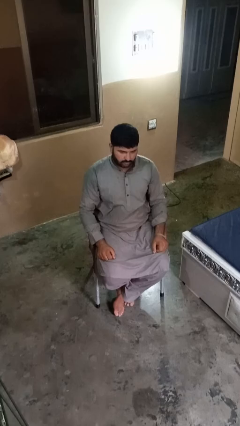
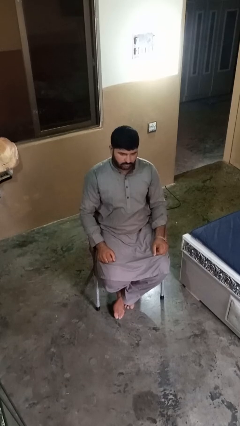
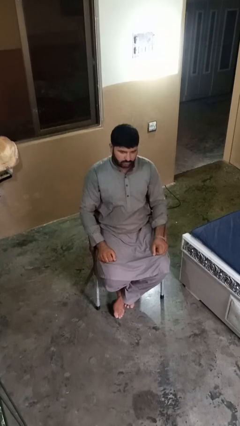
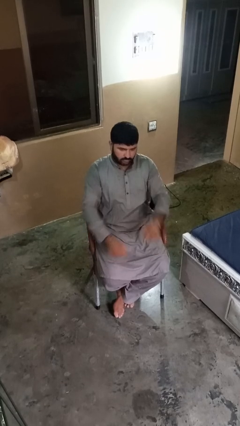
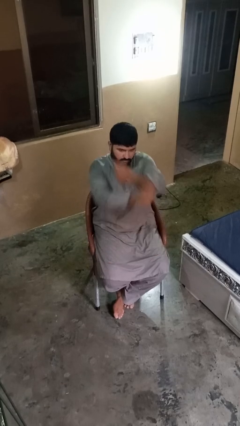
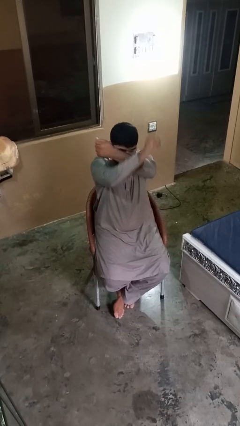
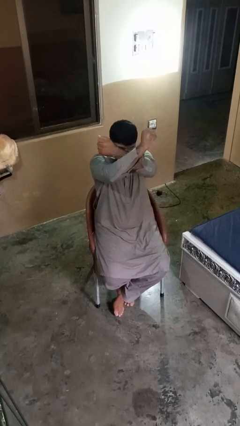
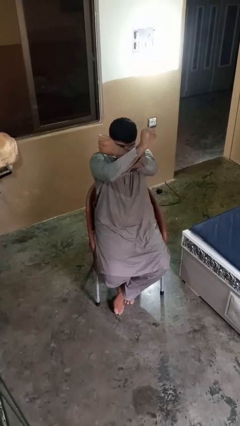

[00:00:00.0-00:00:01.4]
person gestures arms x

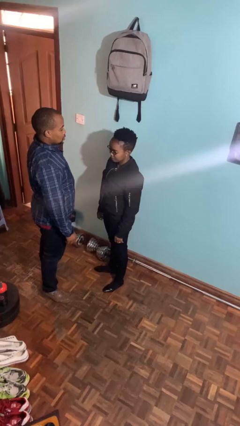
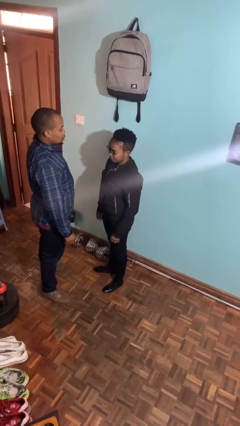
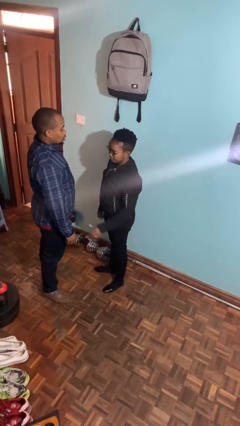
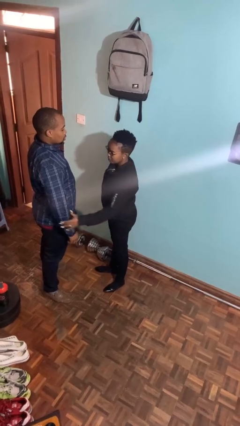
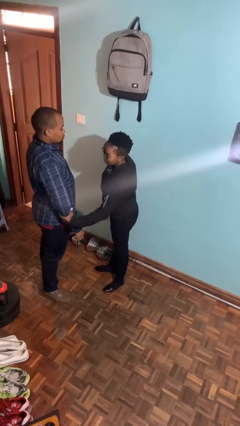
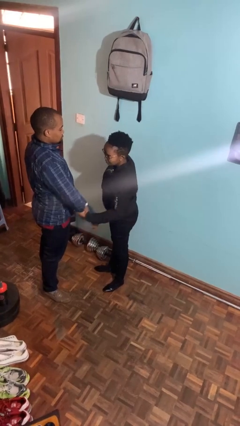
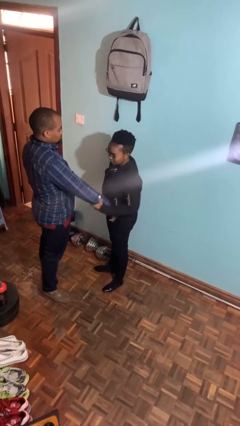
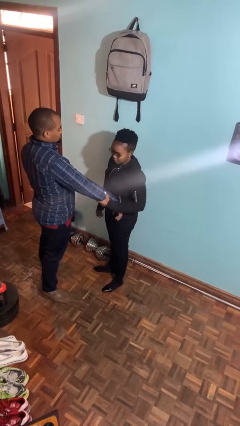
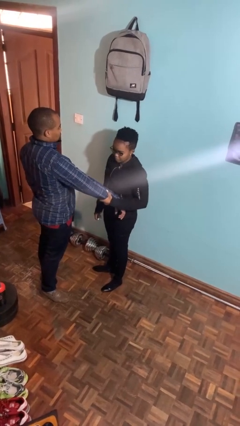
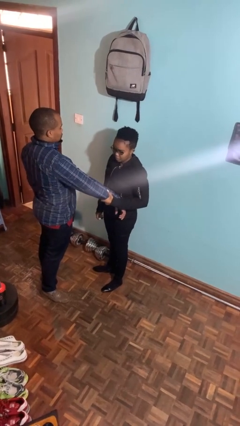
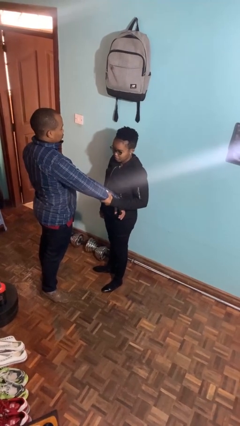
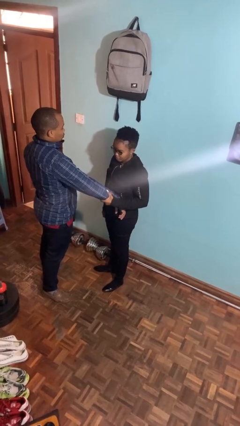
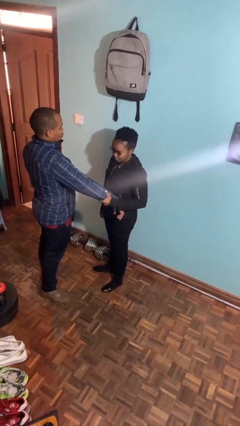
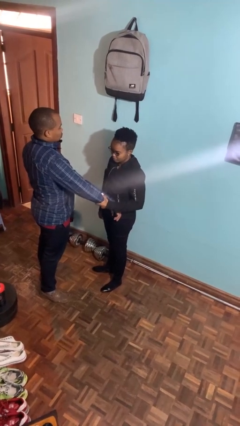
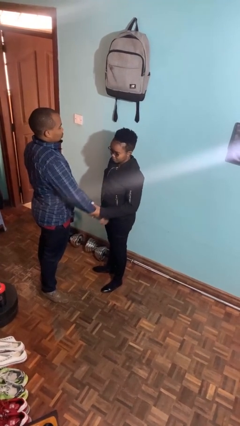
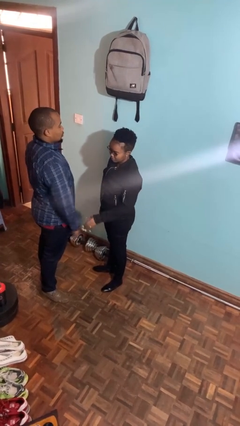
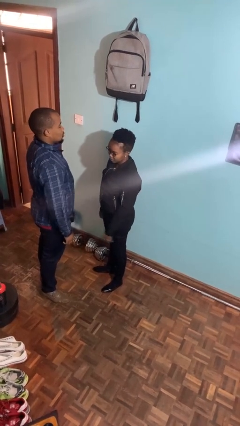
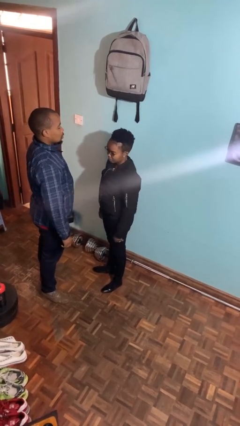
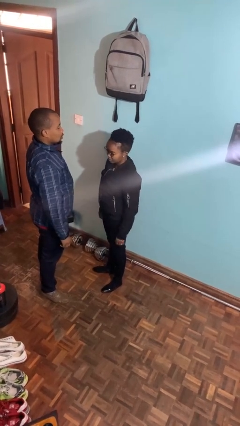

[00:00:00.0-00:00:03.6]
person grabs person by forearm

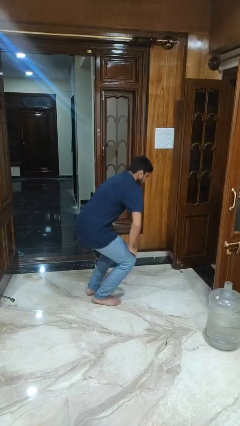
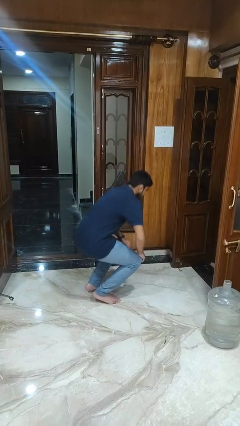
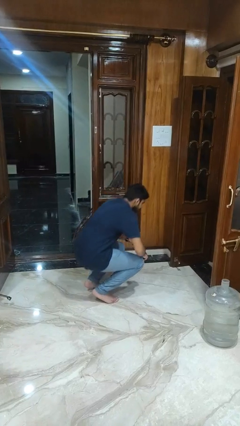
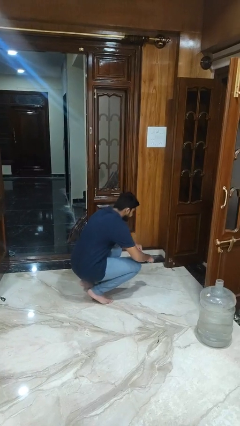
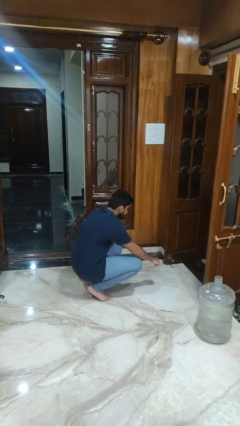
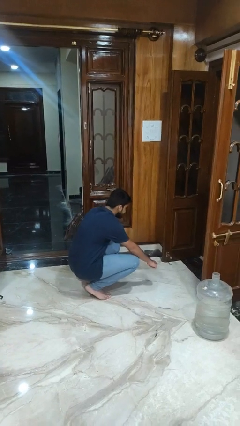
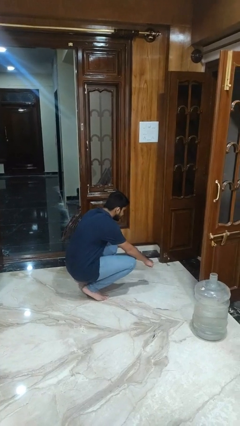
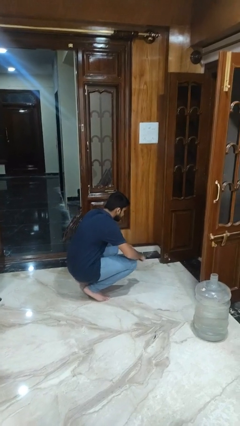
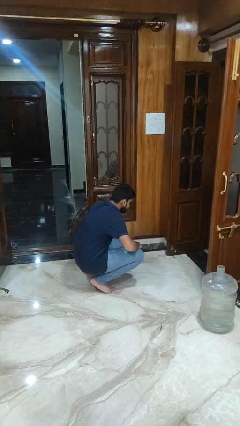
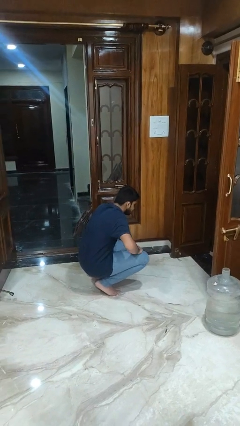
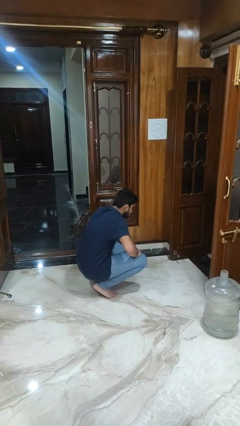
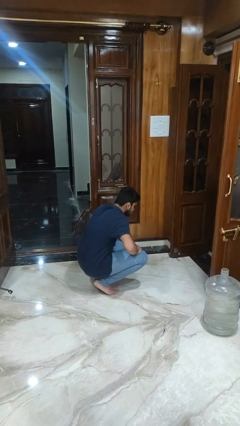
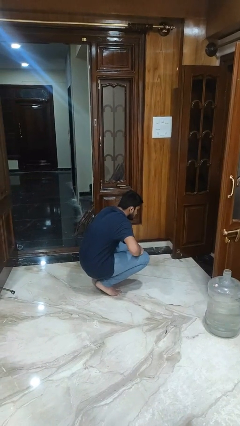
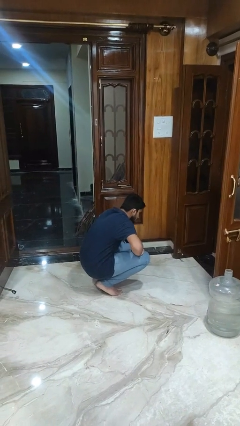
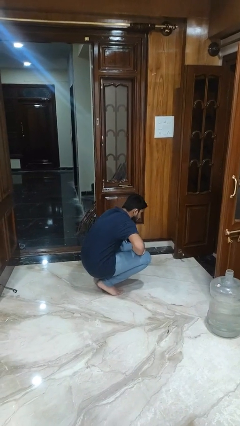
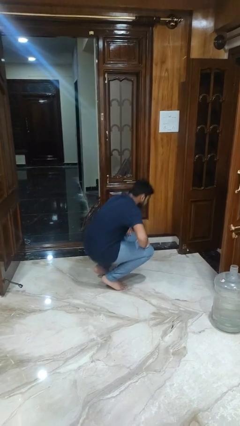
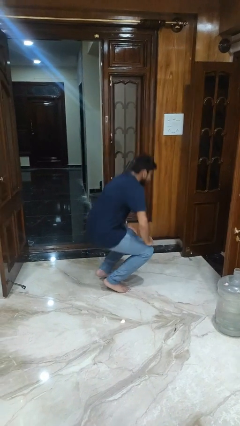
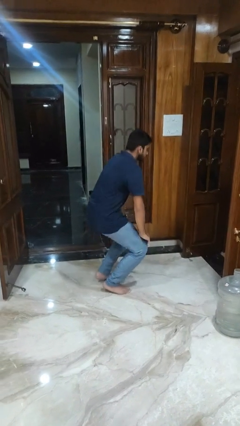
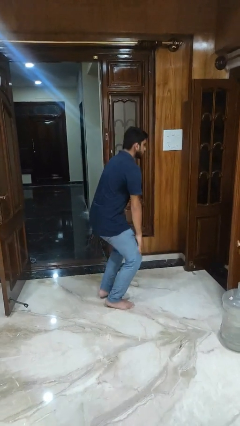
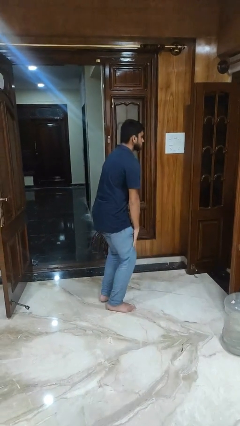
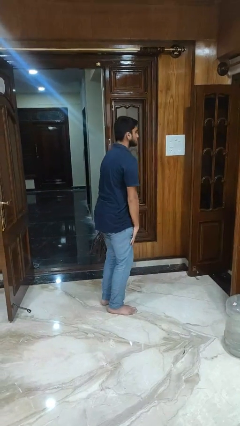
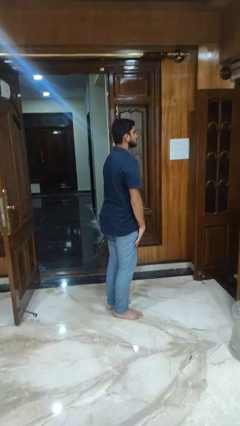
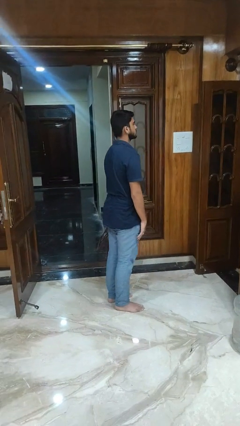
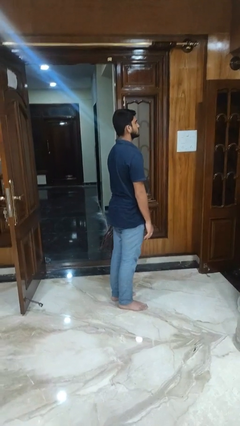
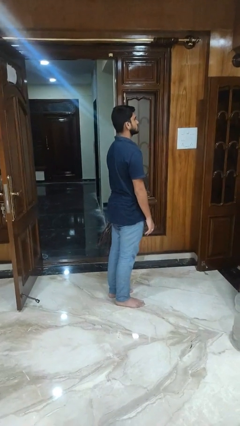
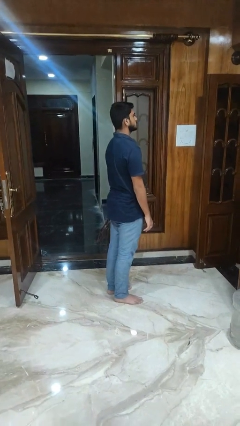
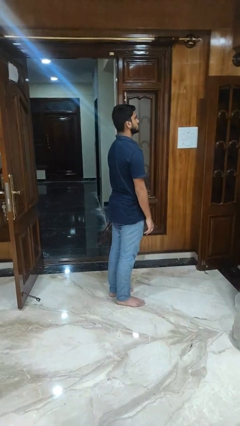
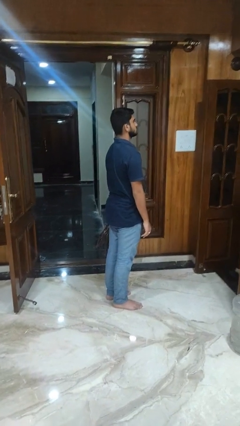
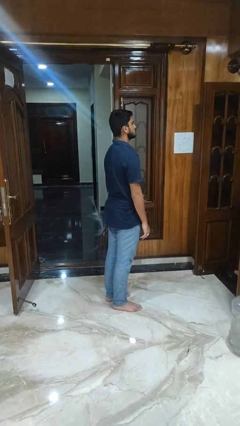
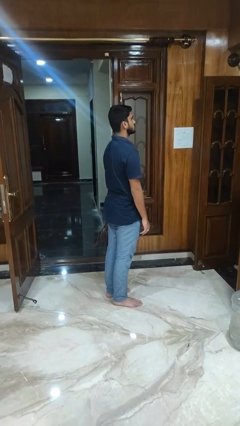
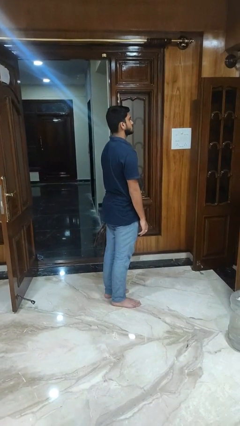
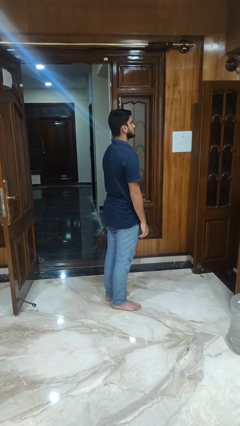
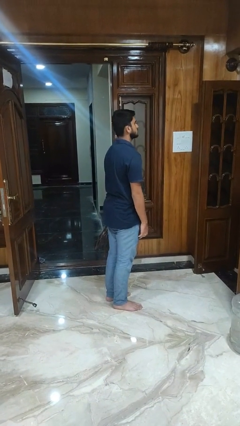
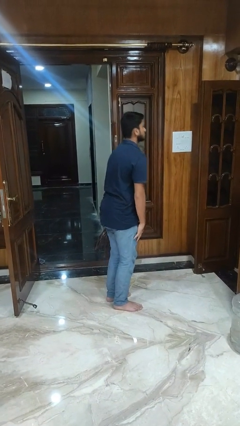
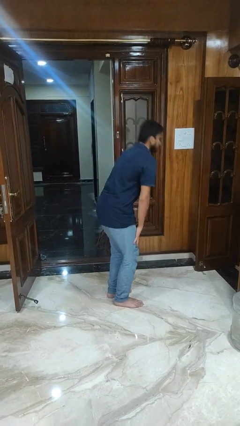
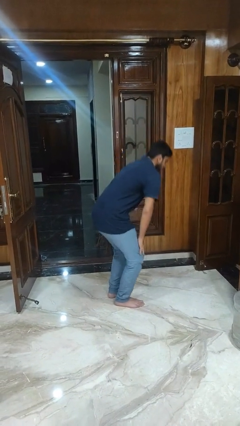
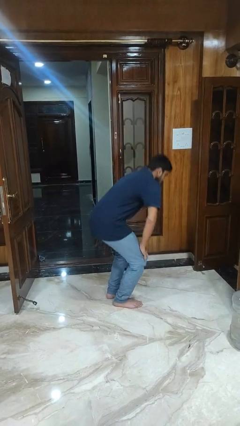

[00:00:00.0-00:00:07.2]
person squats

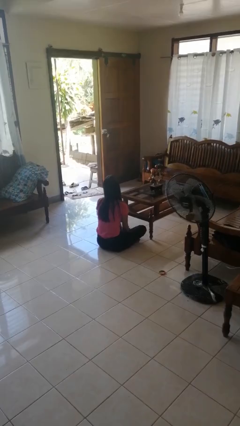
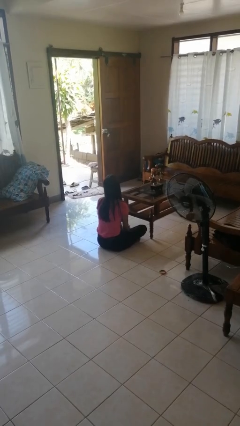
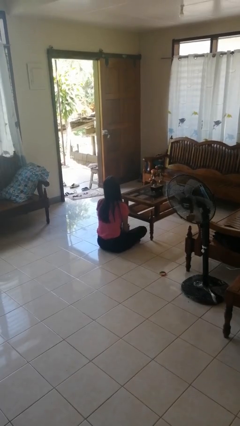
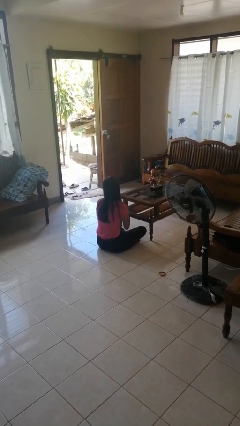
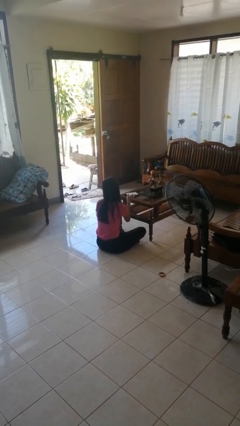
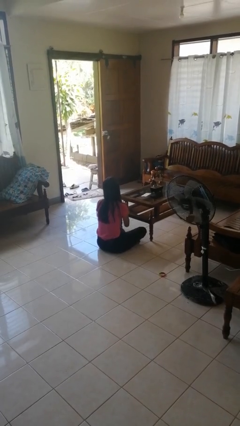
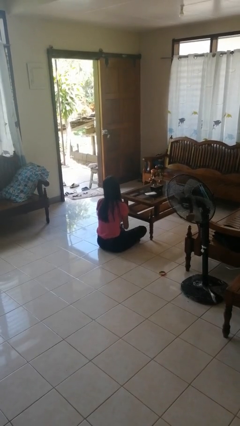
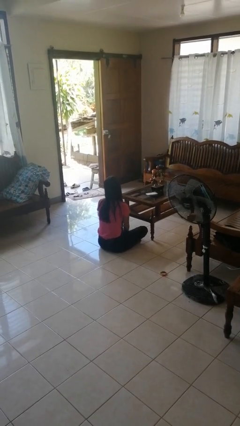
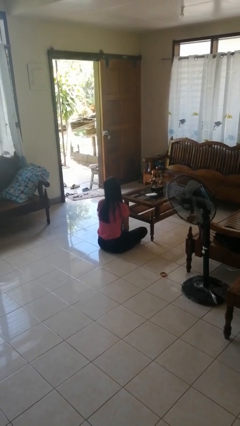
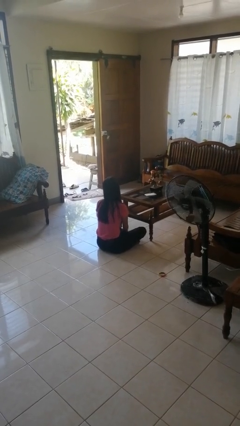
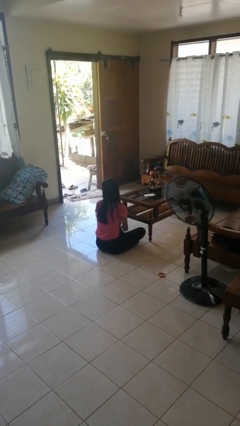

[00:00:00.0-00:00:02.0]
person throws object on table

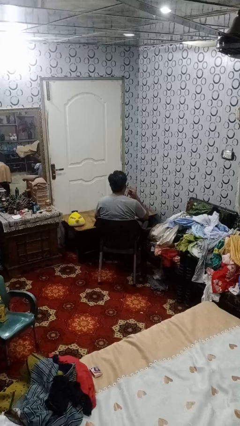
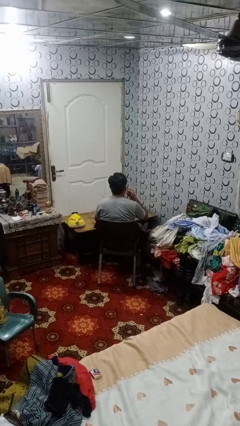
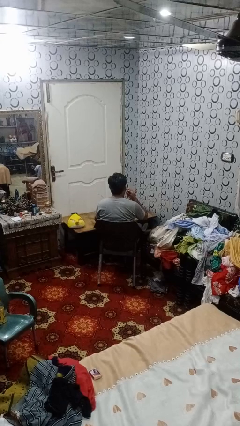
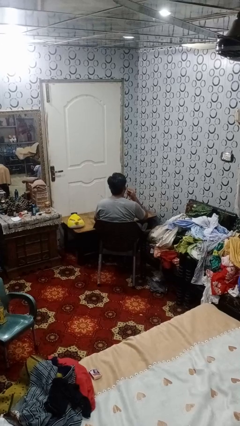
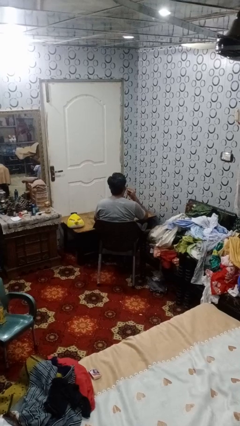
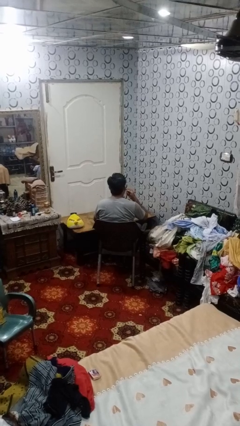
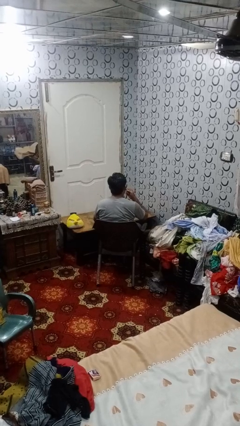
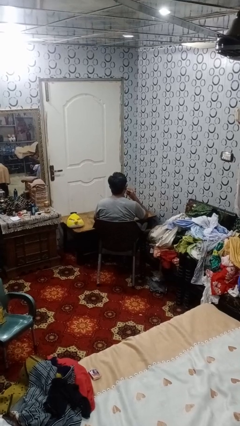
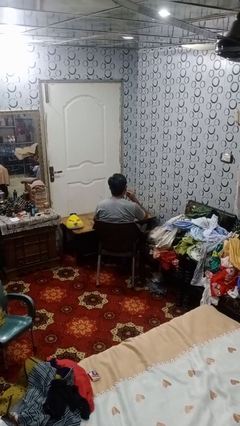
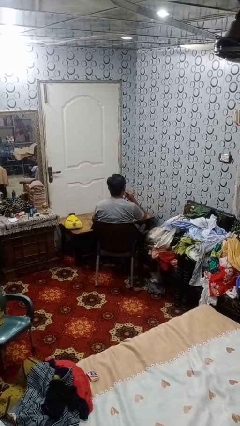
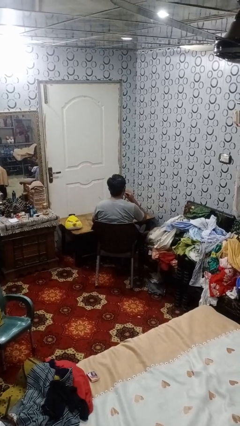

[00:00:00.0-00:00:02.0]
person licks fingers

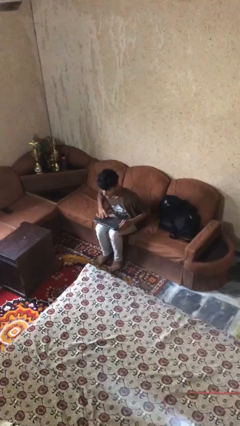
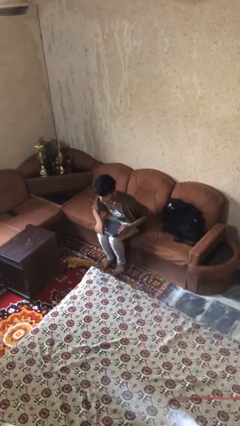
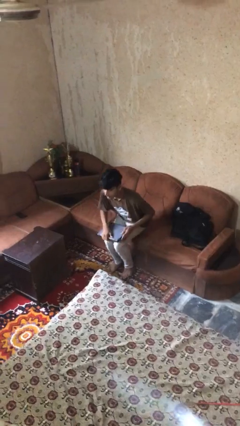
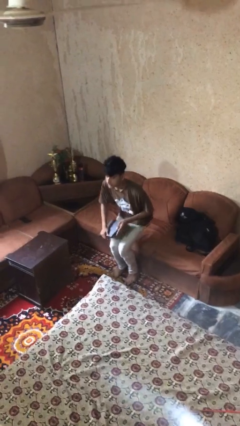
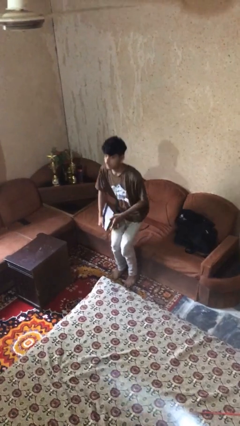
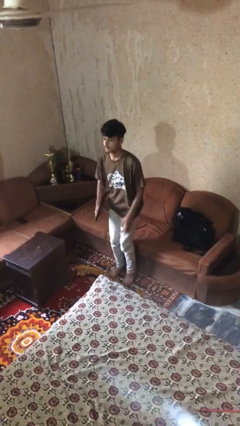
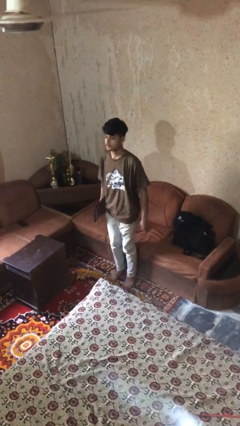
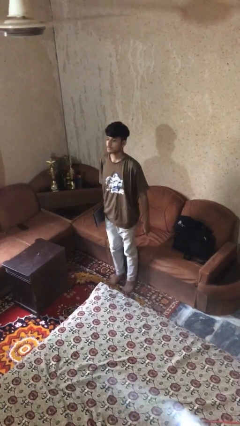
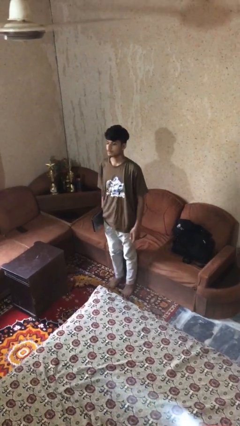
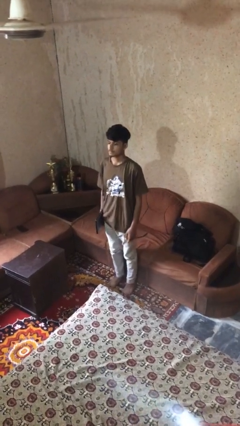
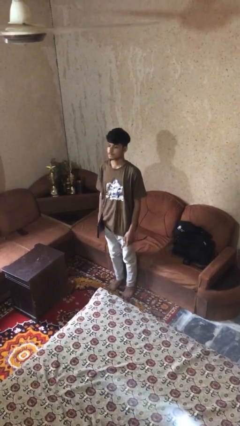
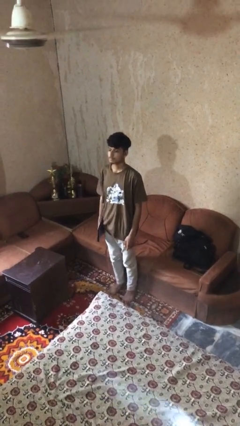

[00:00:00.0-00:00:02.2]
person stands up
